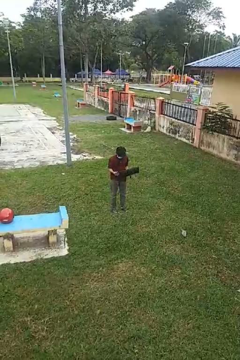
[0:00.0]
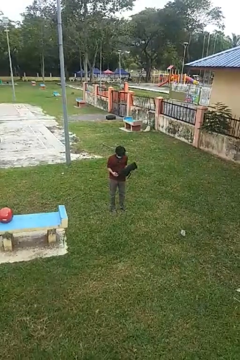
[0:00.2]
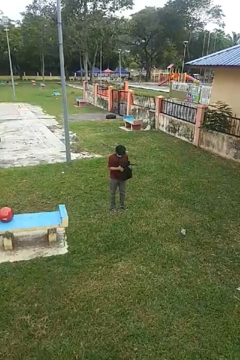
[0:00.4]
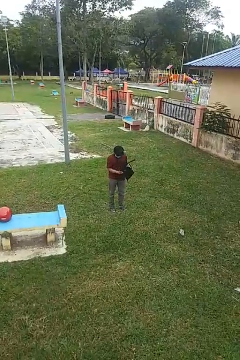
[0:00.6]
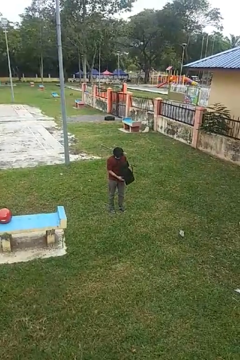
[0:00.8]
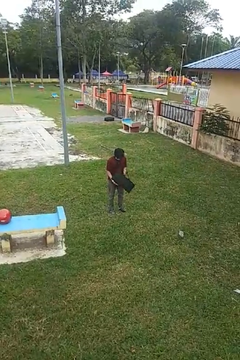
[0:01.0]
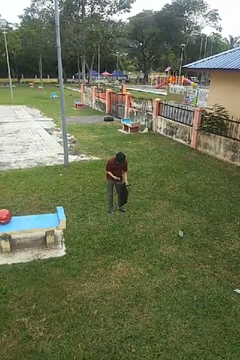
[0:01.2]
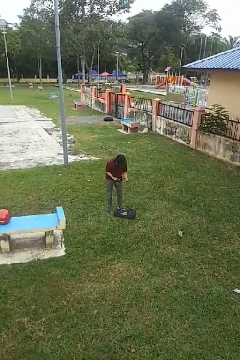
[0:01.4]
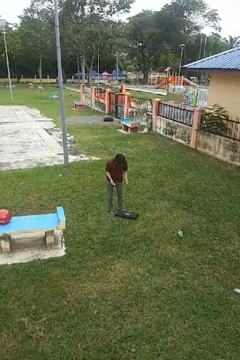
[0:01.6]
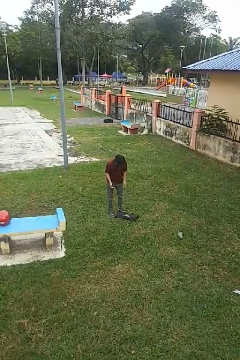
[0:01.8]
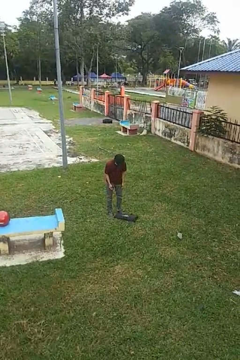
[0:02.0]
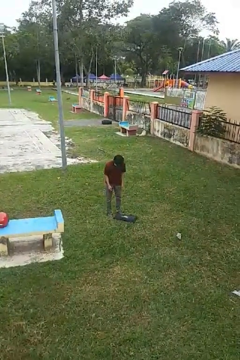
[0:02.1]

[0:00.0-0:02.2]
person drops object

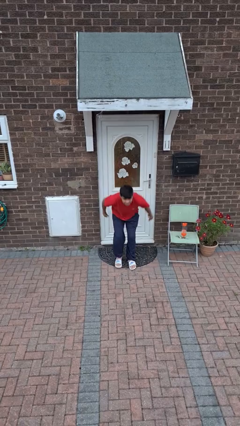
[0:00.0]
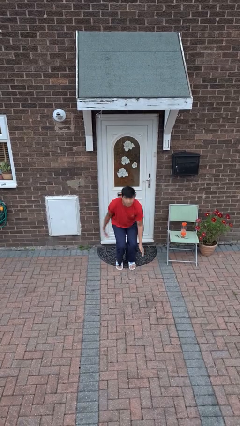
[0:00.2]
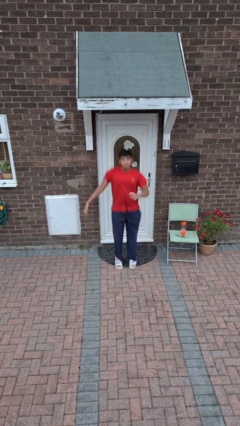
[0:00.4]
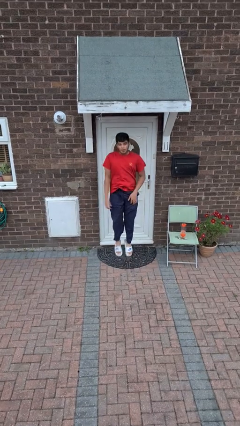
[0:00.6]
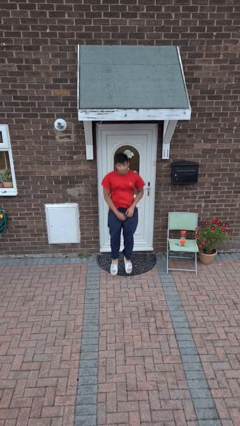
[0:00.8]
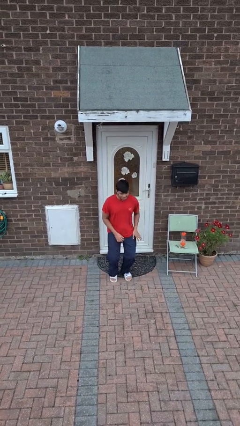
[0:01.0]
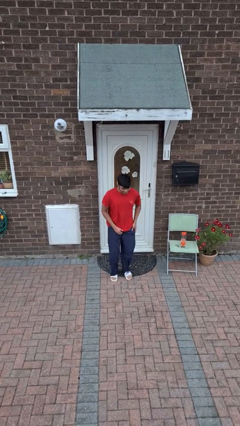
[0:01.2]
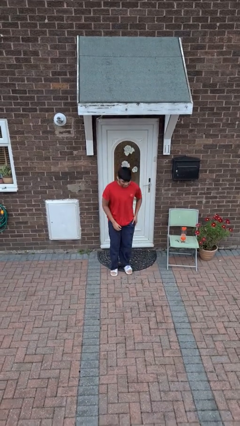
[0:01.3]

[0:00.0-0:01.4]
person jumps

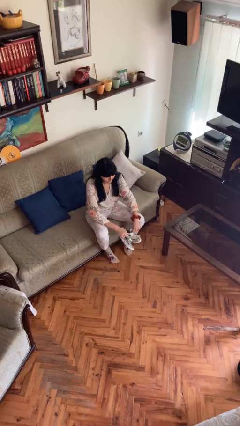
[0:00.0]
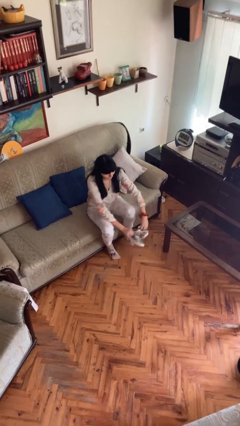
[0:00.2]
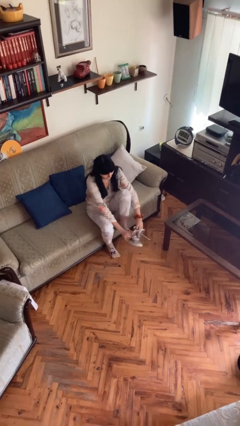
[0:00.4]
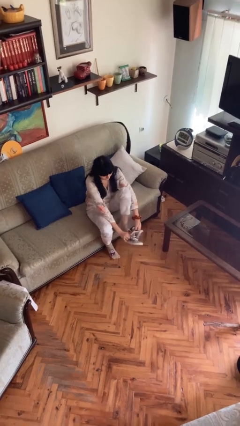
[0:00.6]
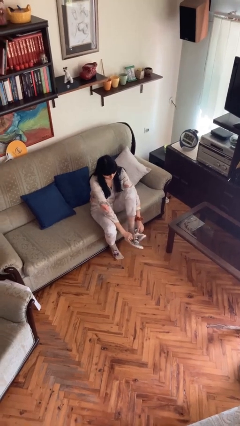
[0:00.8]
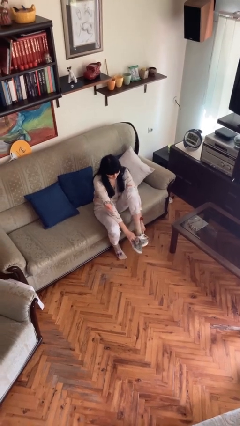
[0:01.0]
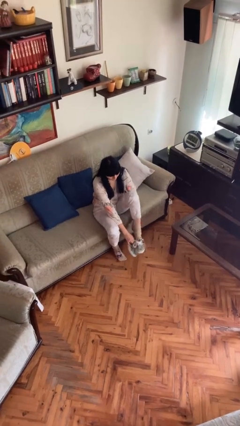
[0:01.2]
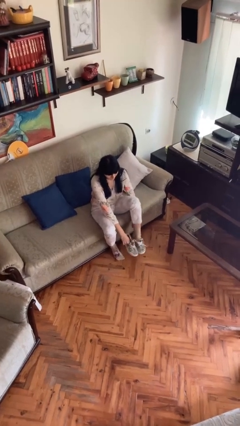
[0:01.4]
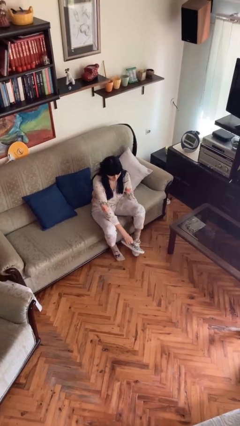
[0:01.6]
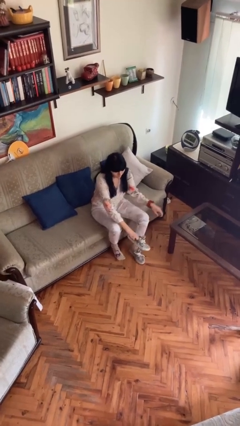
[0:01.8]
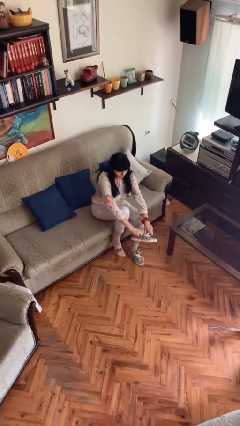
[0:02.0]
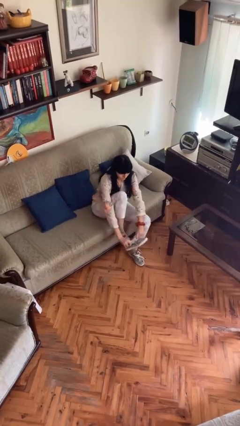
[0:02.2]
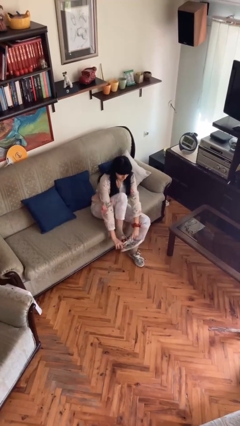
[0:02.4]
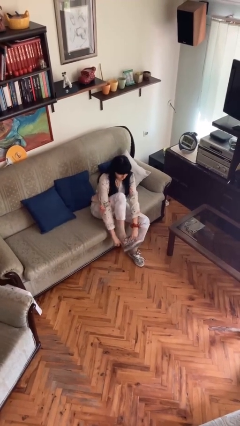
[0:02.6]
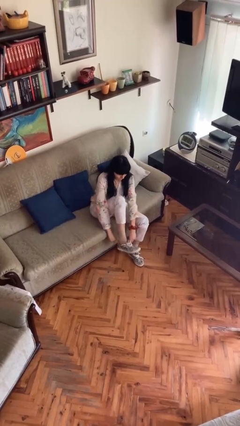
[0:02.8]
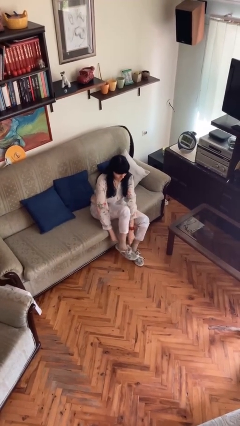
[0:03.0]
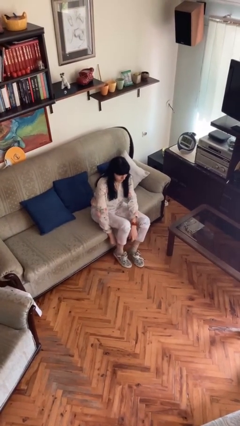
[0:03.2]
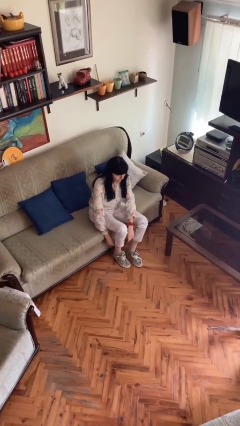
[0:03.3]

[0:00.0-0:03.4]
person puts on shoes

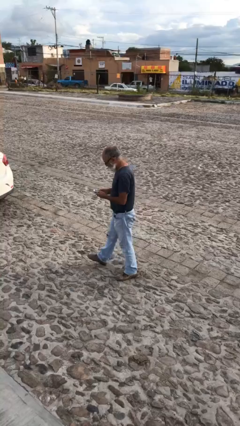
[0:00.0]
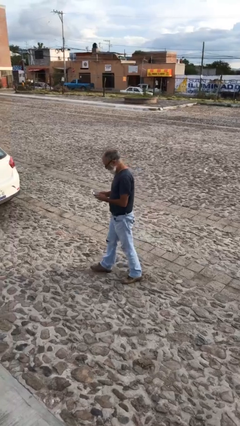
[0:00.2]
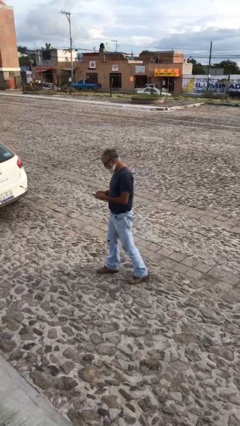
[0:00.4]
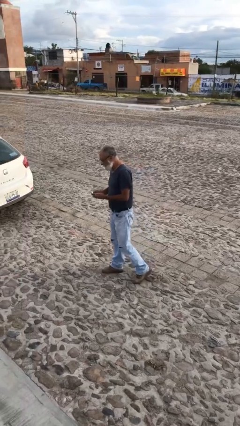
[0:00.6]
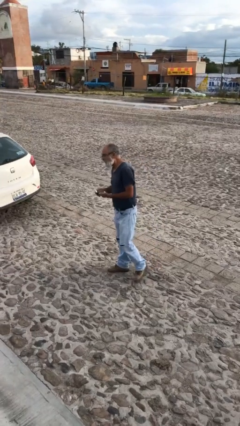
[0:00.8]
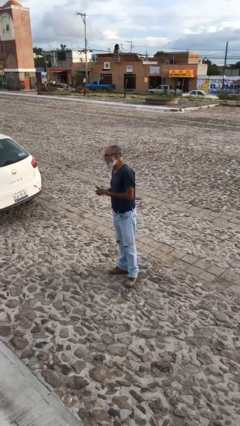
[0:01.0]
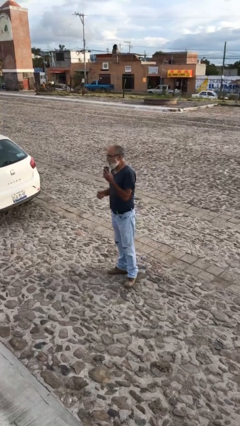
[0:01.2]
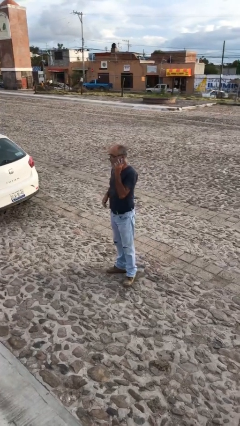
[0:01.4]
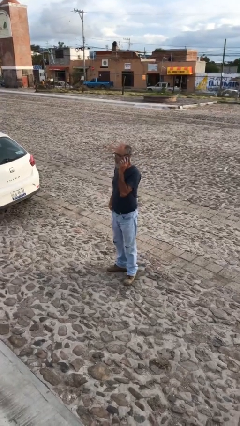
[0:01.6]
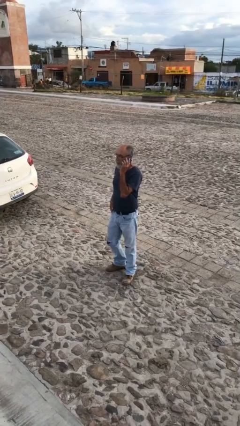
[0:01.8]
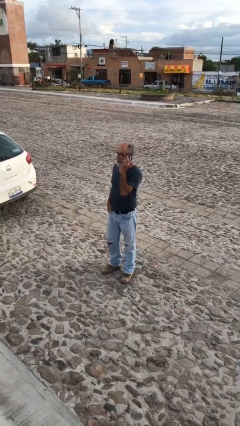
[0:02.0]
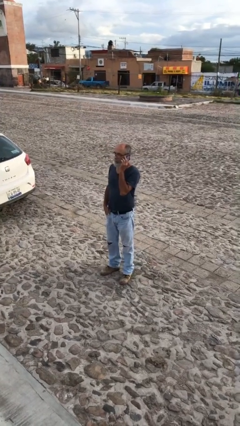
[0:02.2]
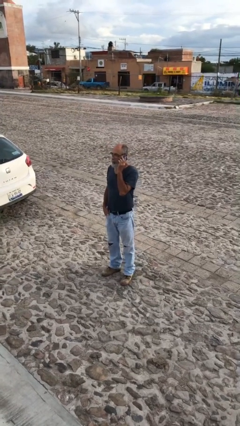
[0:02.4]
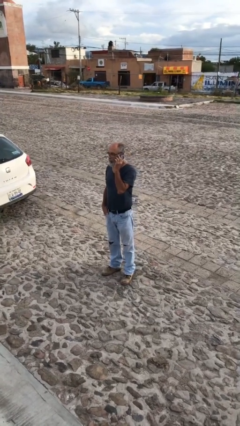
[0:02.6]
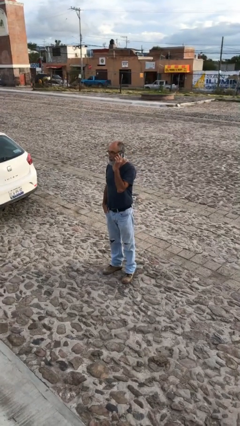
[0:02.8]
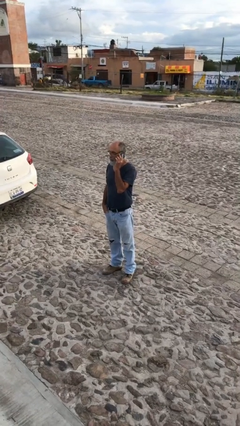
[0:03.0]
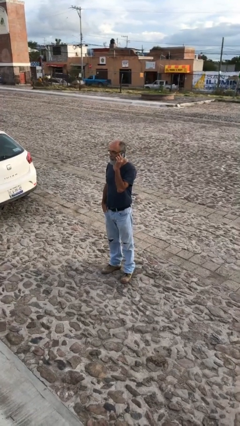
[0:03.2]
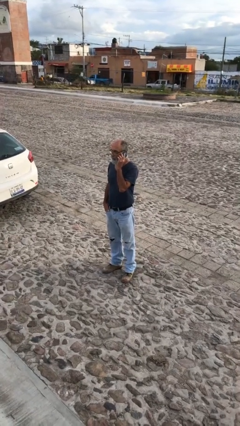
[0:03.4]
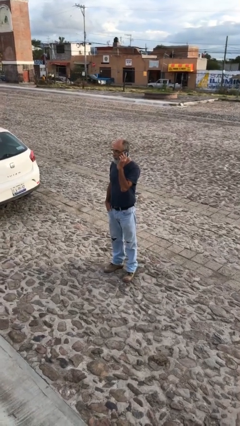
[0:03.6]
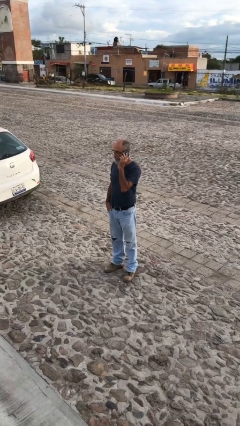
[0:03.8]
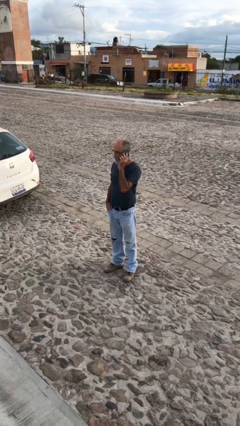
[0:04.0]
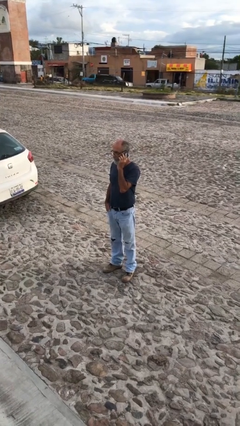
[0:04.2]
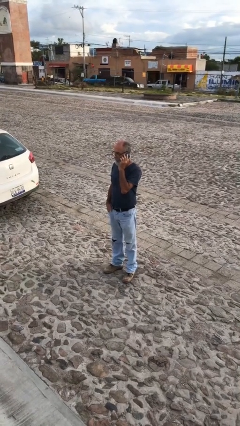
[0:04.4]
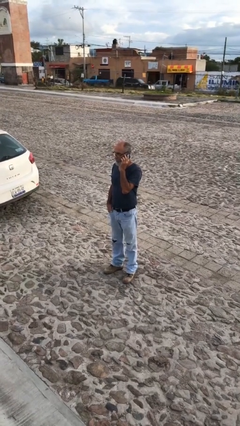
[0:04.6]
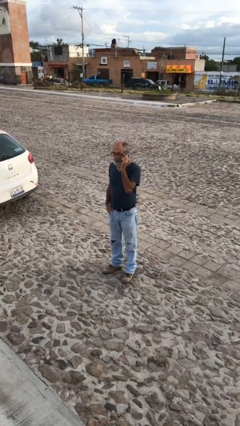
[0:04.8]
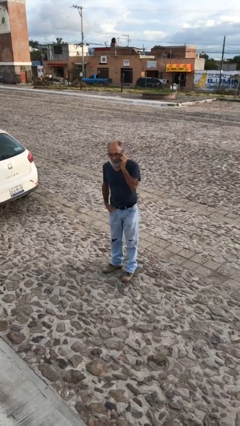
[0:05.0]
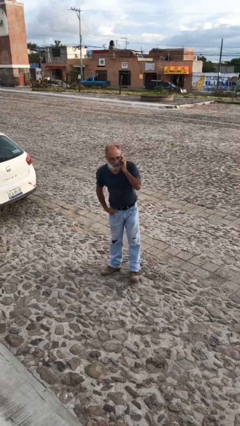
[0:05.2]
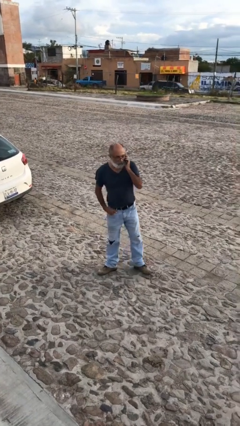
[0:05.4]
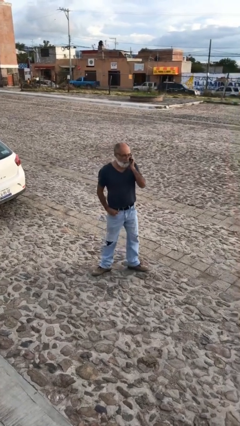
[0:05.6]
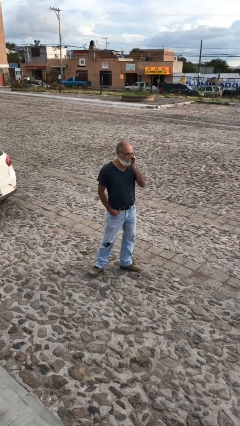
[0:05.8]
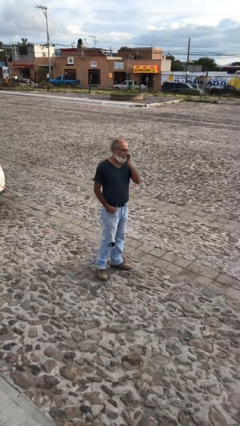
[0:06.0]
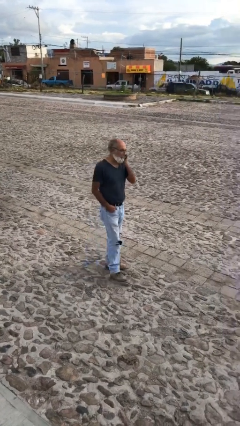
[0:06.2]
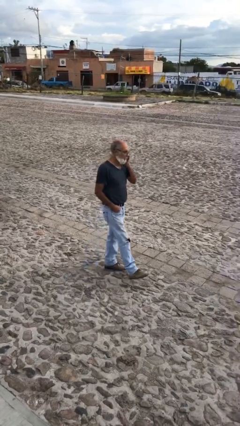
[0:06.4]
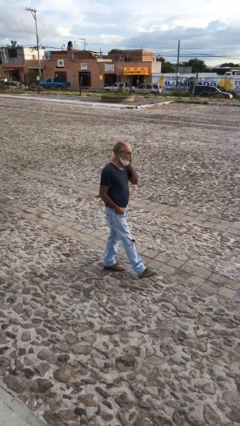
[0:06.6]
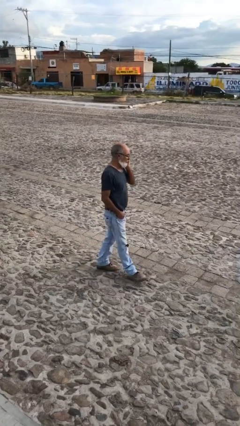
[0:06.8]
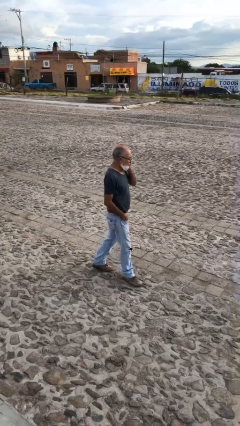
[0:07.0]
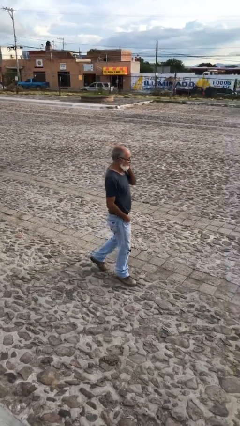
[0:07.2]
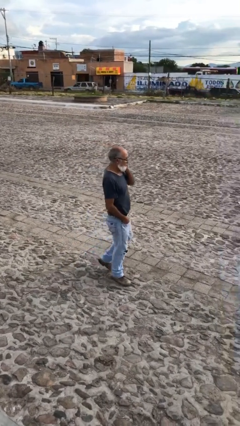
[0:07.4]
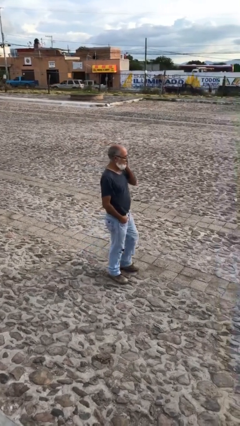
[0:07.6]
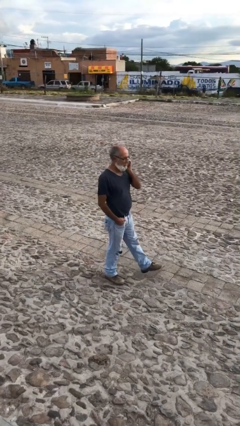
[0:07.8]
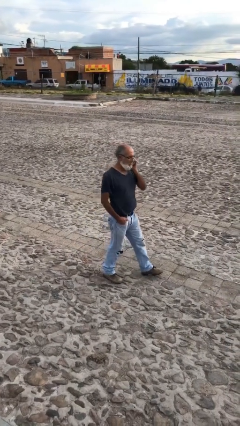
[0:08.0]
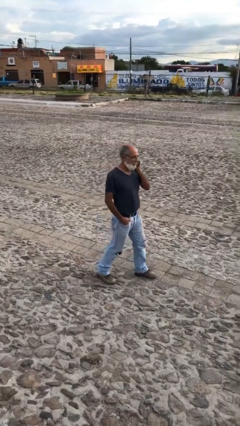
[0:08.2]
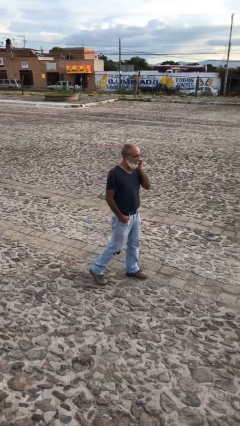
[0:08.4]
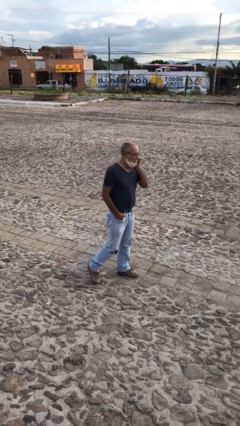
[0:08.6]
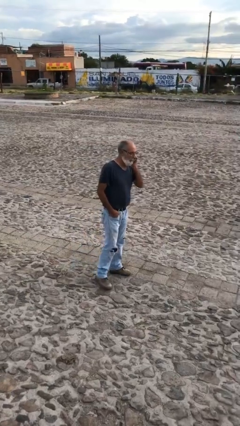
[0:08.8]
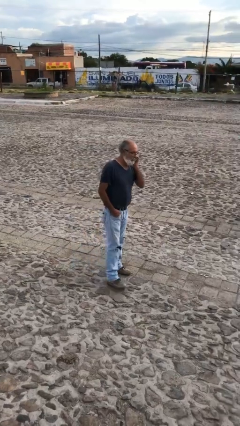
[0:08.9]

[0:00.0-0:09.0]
person talks on phone

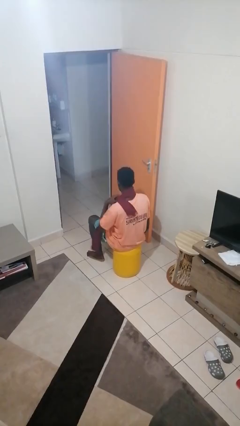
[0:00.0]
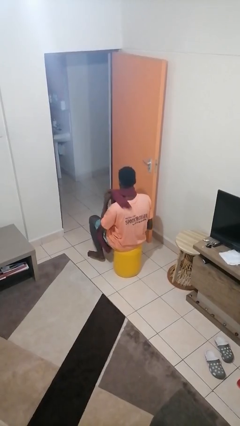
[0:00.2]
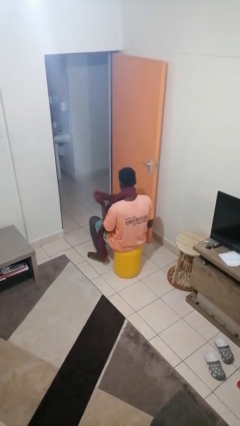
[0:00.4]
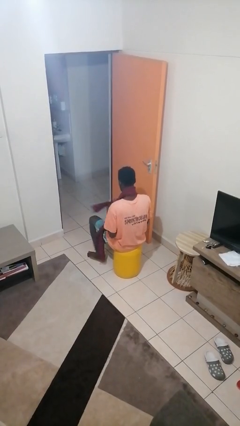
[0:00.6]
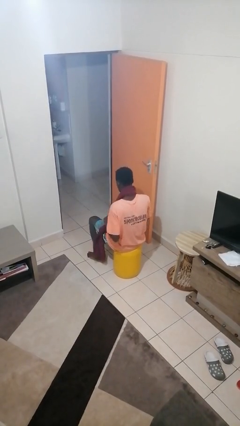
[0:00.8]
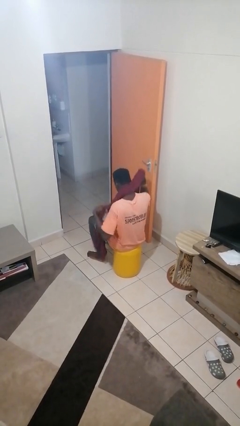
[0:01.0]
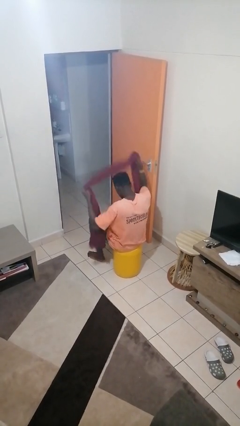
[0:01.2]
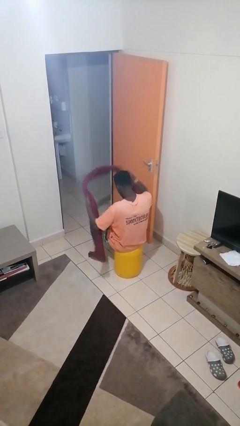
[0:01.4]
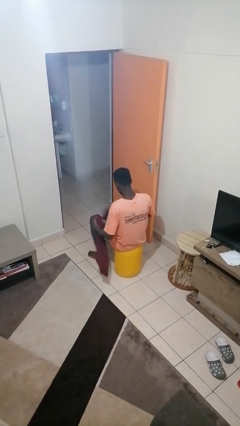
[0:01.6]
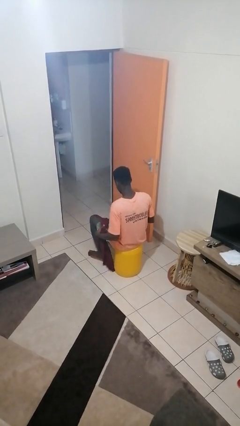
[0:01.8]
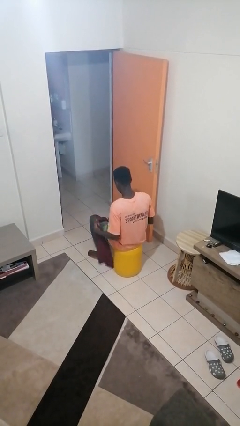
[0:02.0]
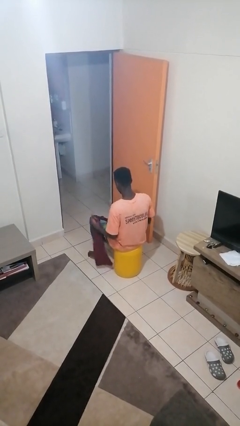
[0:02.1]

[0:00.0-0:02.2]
person takes off scarf

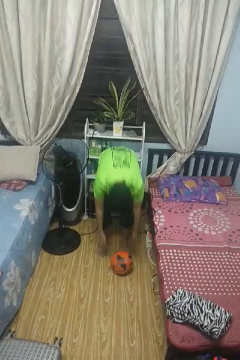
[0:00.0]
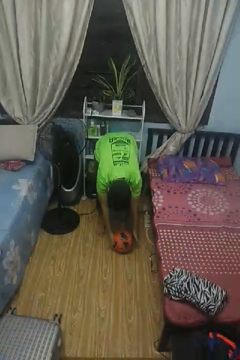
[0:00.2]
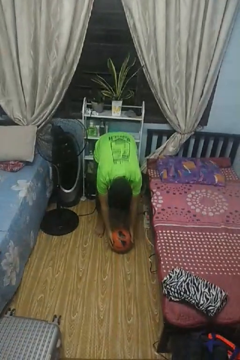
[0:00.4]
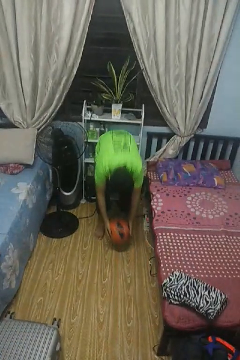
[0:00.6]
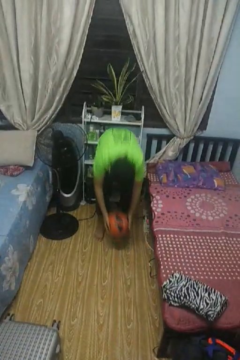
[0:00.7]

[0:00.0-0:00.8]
person picks up object from floor
